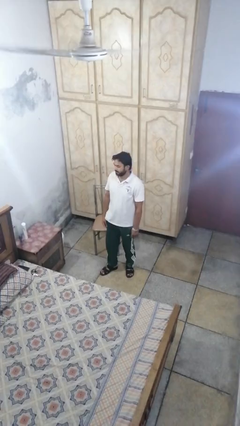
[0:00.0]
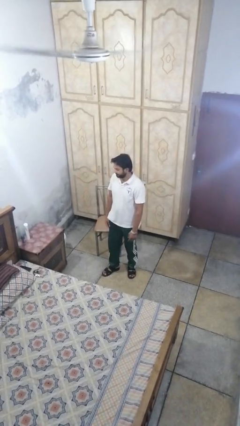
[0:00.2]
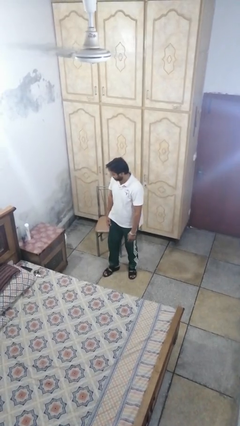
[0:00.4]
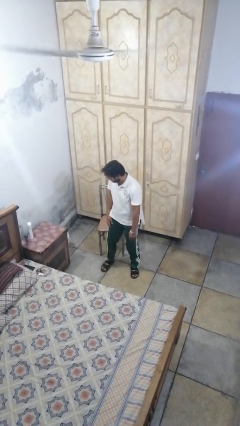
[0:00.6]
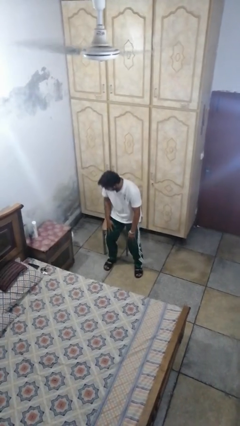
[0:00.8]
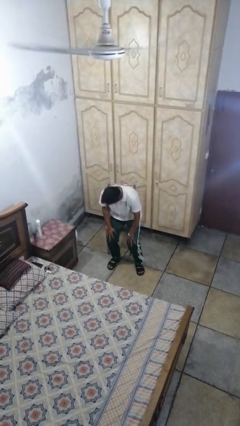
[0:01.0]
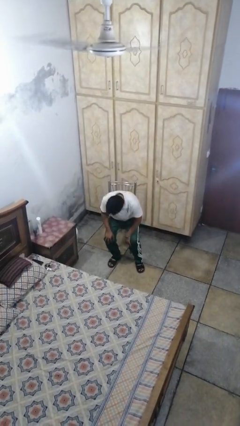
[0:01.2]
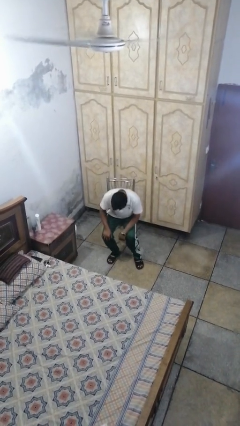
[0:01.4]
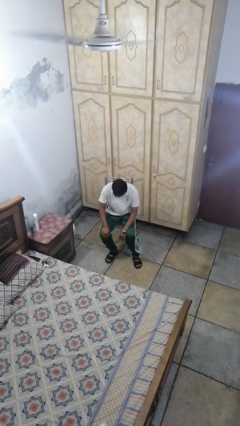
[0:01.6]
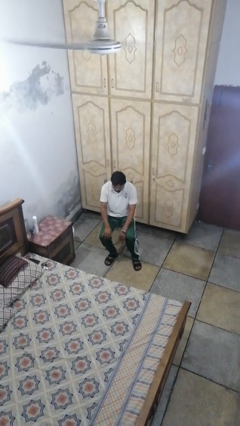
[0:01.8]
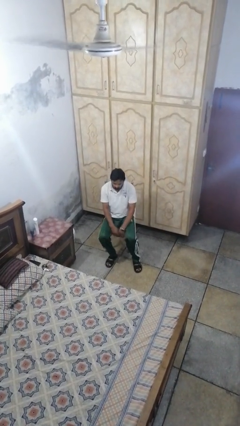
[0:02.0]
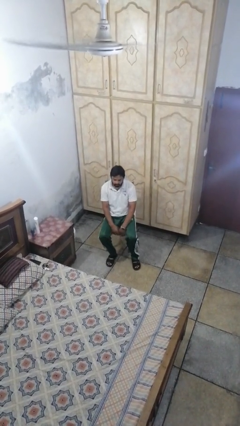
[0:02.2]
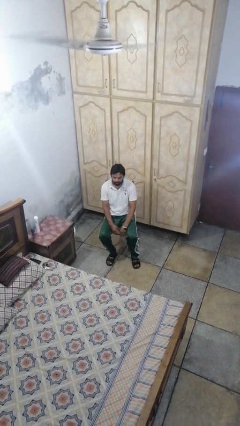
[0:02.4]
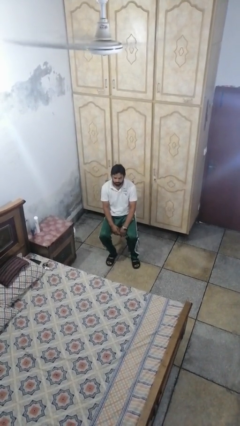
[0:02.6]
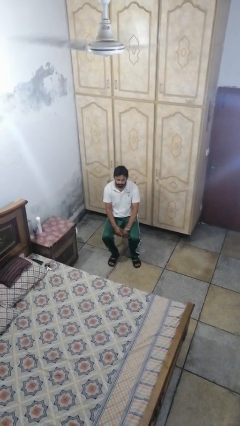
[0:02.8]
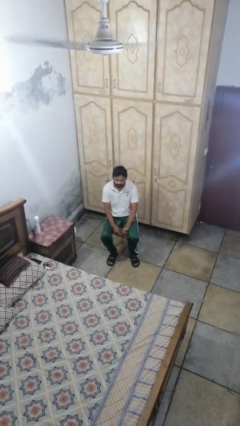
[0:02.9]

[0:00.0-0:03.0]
person sits down

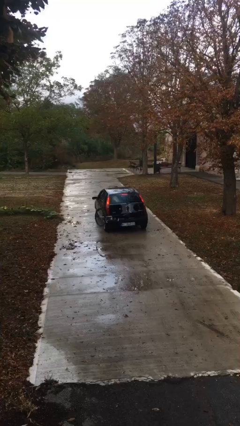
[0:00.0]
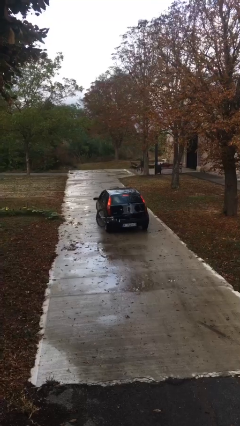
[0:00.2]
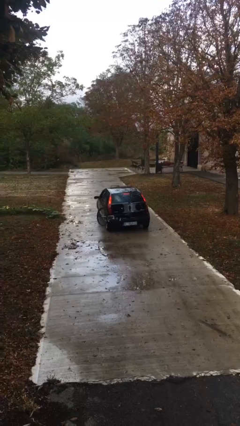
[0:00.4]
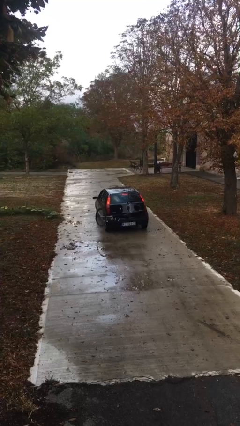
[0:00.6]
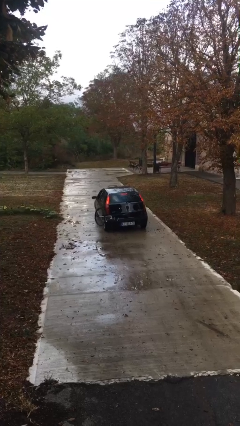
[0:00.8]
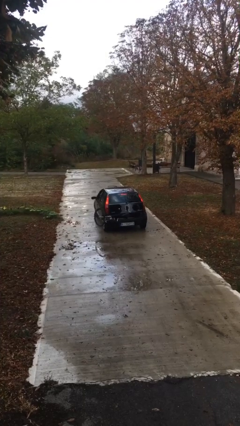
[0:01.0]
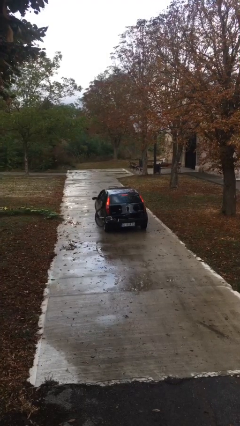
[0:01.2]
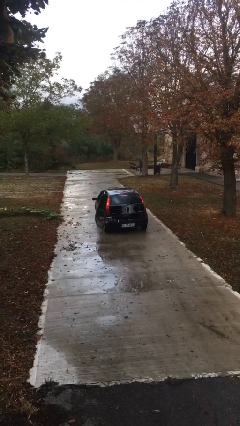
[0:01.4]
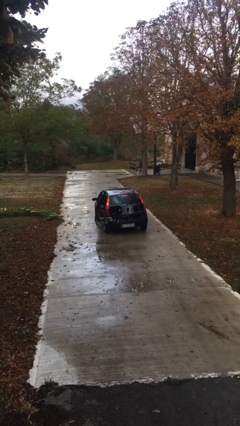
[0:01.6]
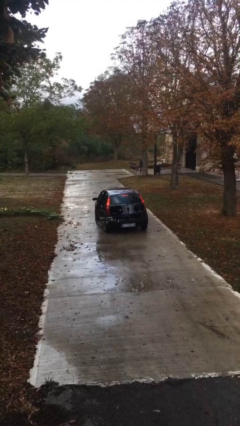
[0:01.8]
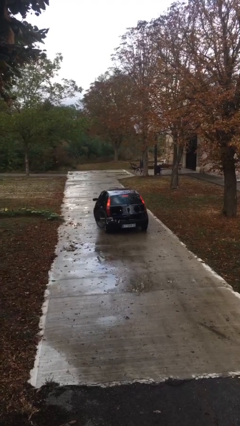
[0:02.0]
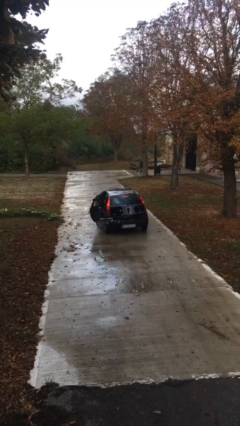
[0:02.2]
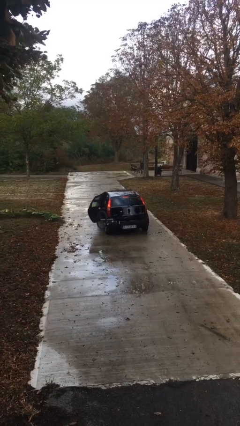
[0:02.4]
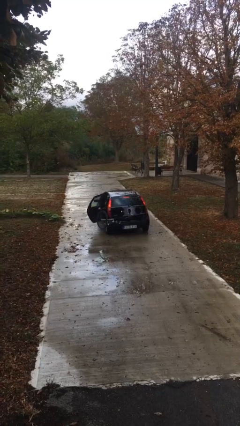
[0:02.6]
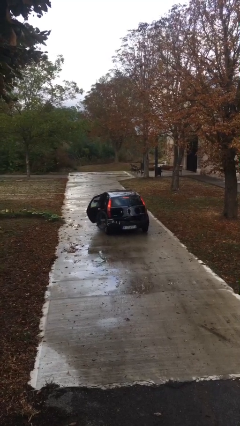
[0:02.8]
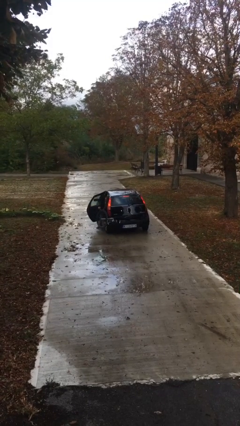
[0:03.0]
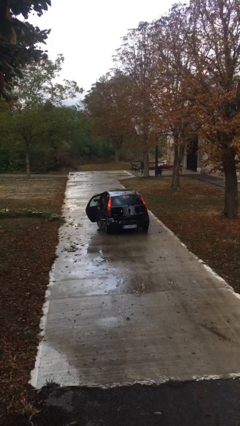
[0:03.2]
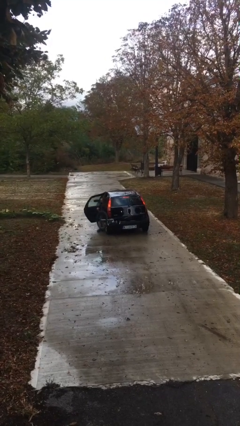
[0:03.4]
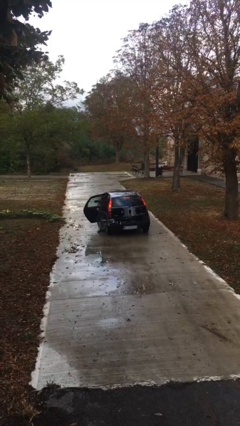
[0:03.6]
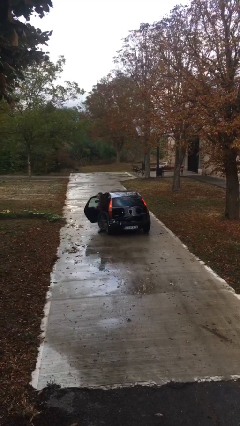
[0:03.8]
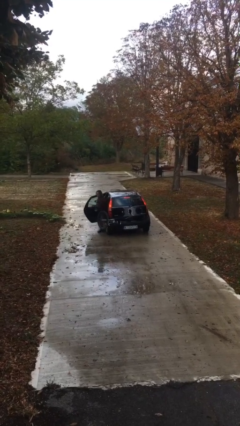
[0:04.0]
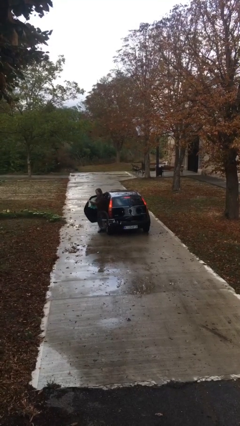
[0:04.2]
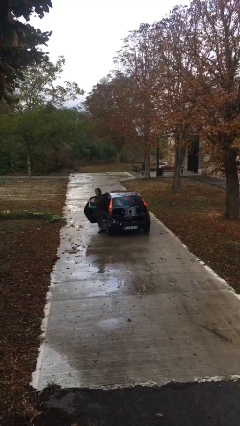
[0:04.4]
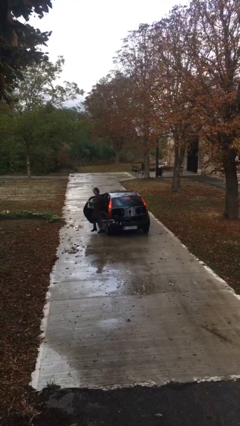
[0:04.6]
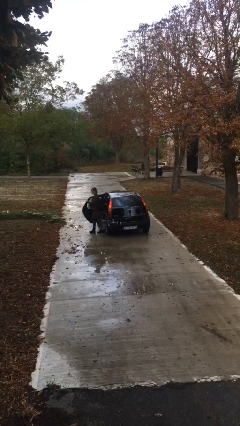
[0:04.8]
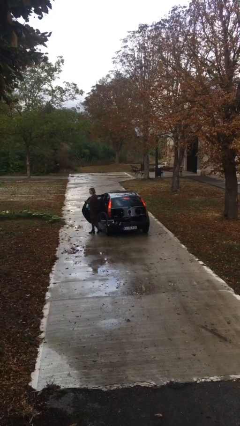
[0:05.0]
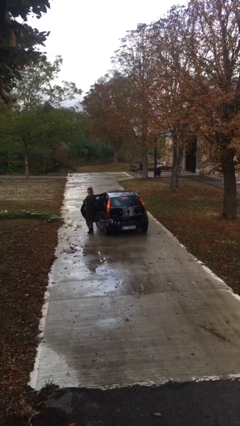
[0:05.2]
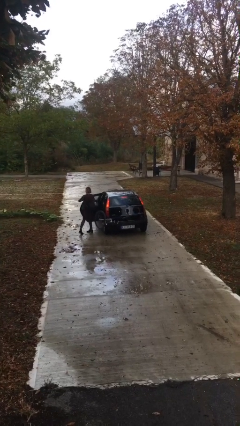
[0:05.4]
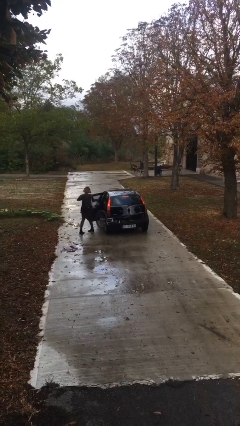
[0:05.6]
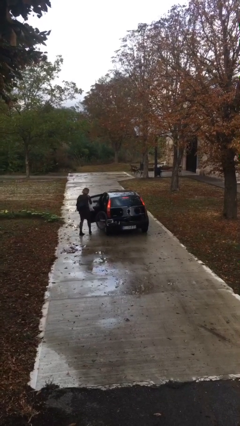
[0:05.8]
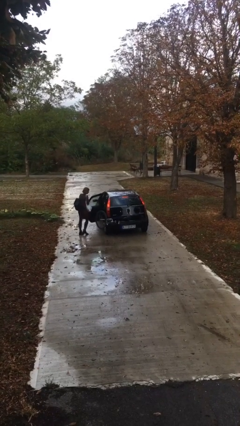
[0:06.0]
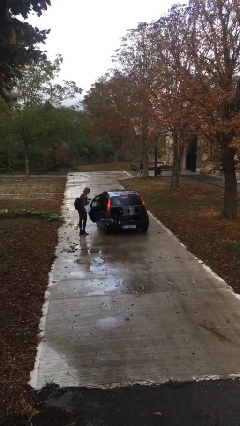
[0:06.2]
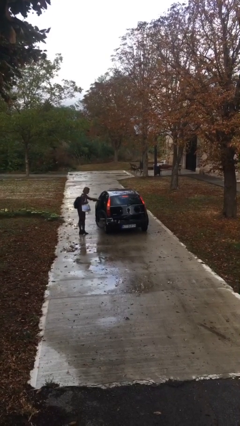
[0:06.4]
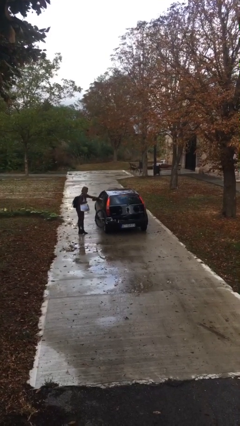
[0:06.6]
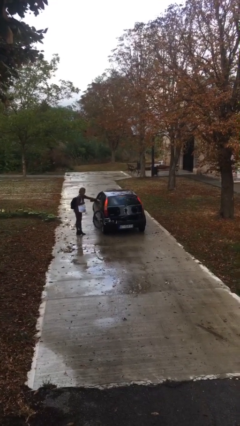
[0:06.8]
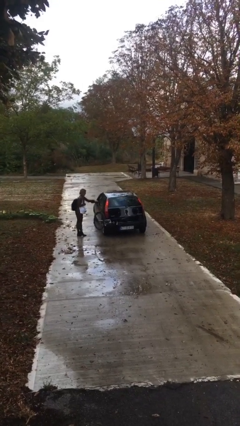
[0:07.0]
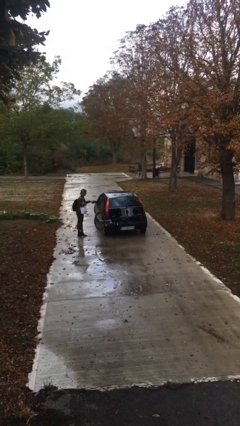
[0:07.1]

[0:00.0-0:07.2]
car drops off person

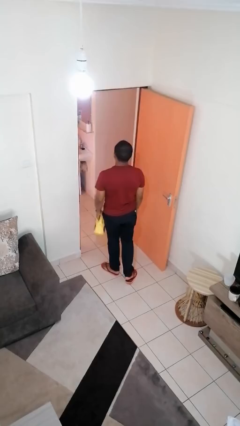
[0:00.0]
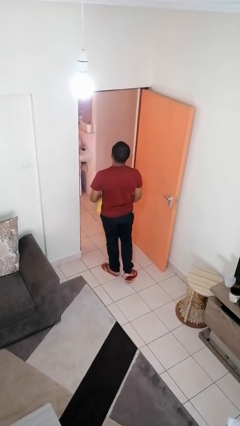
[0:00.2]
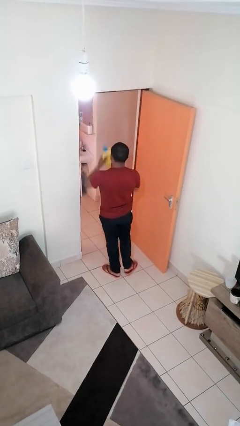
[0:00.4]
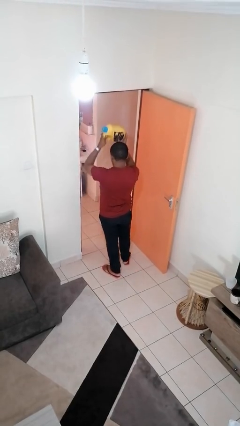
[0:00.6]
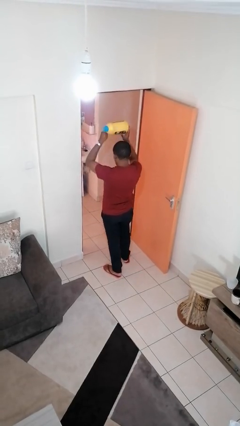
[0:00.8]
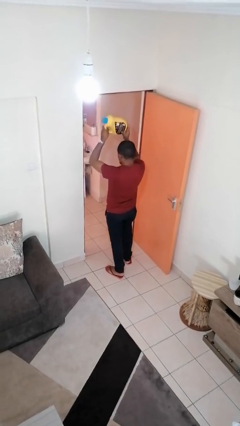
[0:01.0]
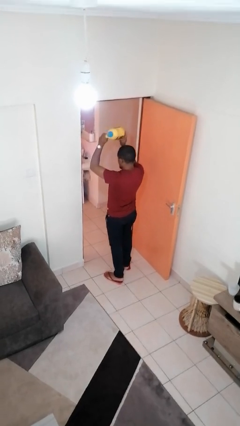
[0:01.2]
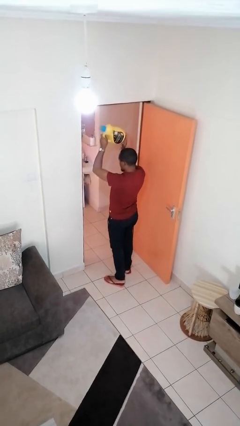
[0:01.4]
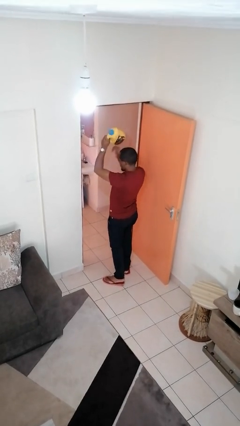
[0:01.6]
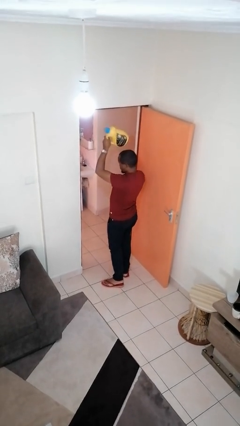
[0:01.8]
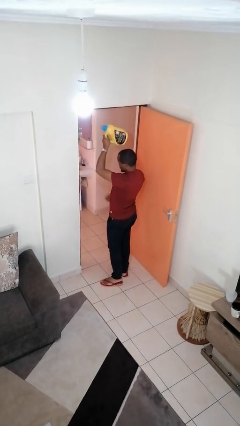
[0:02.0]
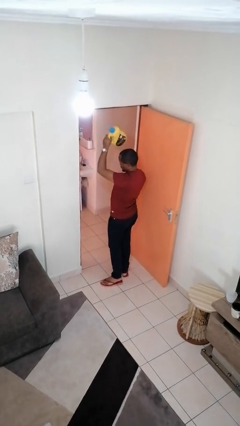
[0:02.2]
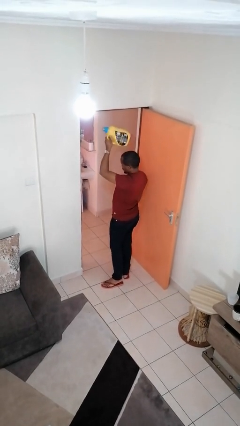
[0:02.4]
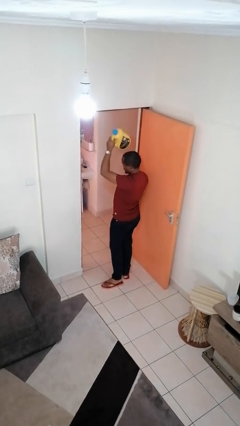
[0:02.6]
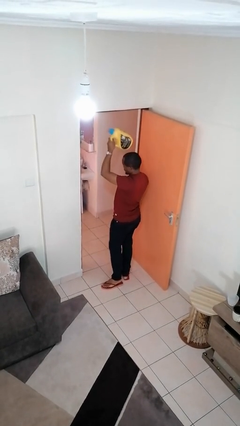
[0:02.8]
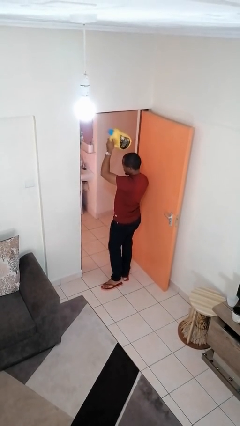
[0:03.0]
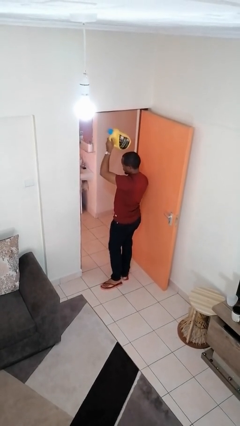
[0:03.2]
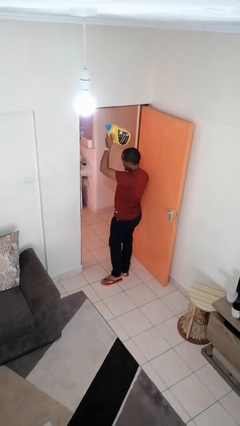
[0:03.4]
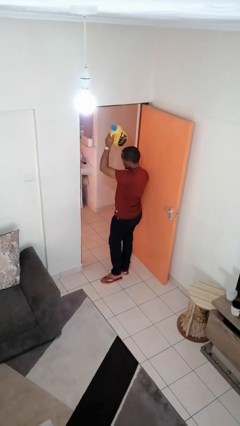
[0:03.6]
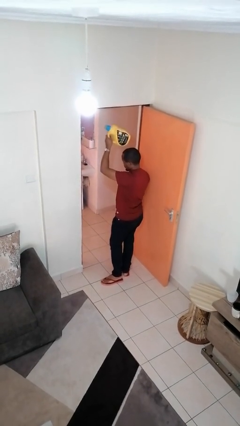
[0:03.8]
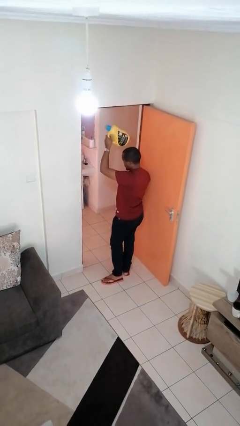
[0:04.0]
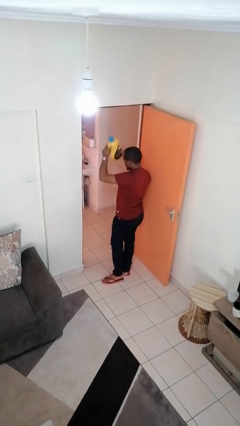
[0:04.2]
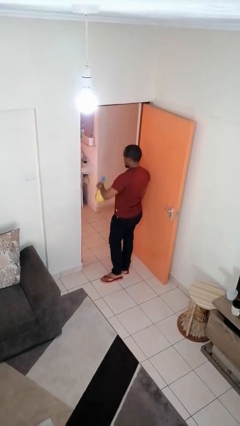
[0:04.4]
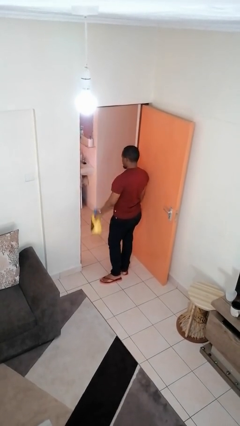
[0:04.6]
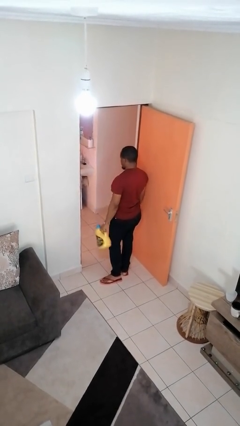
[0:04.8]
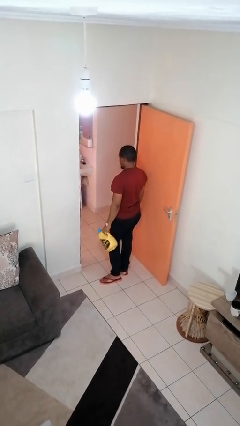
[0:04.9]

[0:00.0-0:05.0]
person holds object above head

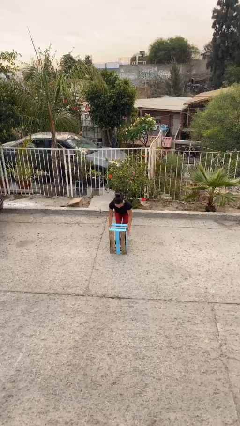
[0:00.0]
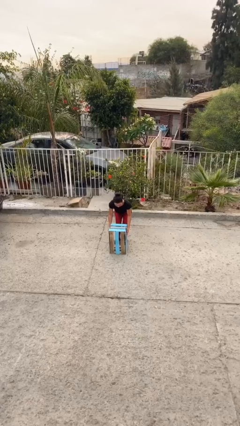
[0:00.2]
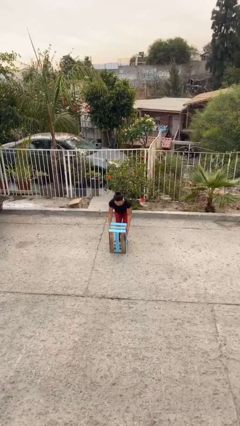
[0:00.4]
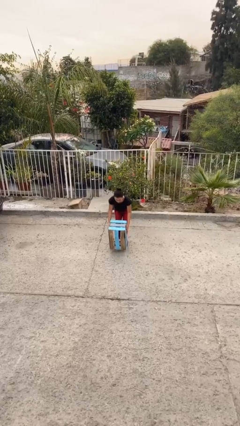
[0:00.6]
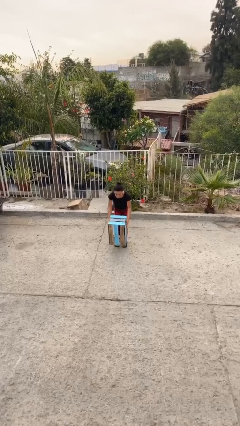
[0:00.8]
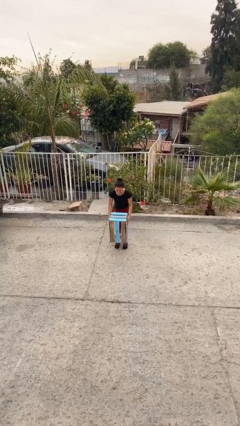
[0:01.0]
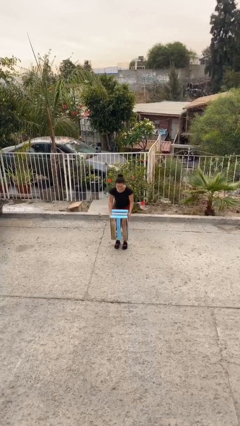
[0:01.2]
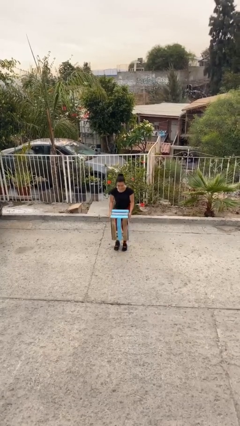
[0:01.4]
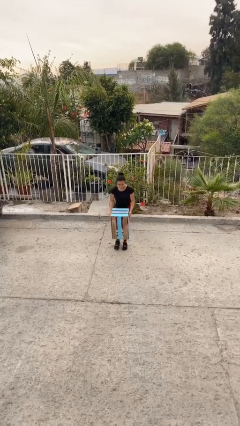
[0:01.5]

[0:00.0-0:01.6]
person picks up object from floor

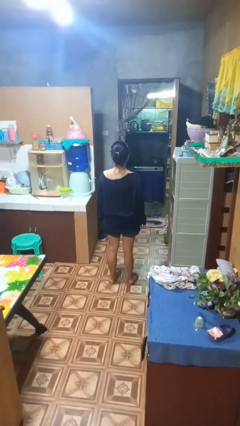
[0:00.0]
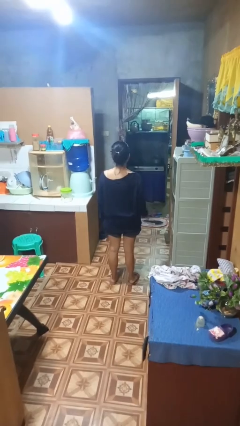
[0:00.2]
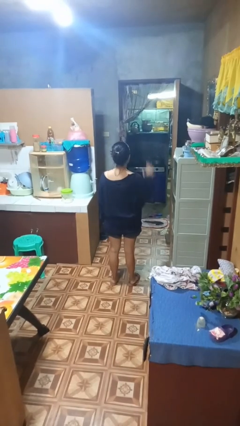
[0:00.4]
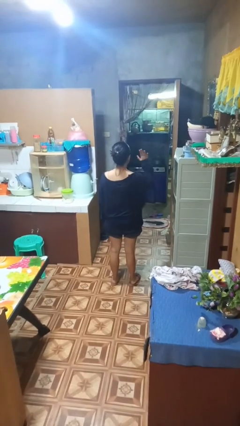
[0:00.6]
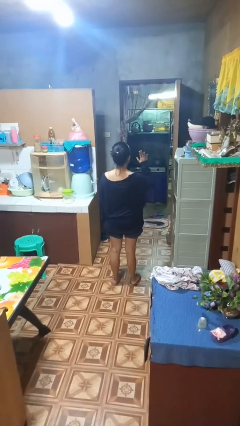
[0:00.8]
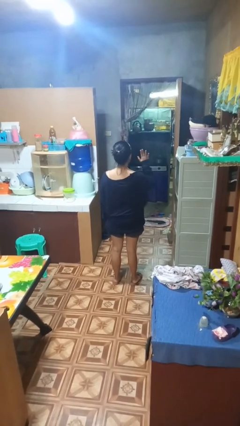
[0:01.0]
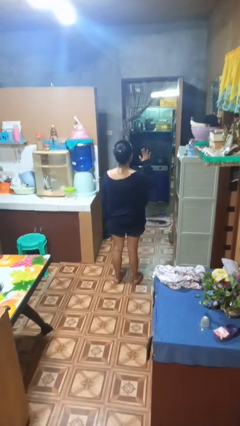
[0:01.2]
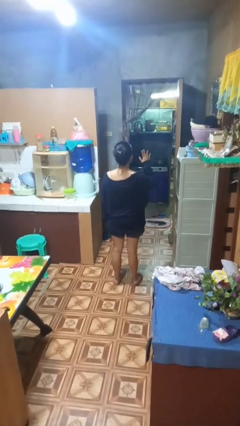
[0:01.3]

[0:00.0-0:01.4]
person gestures number five
